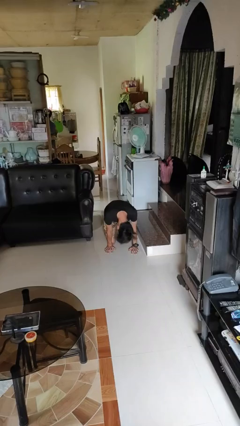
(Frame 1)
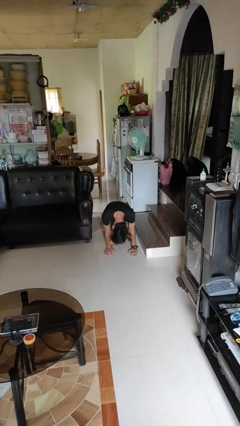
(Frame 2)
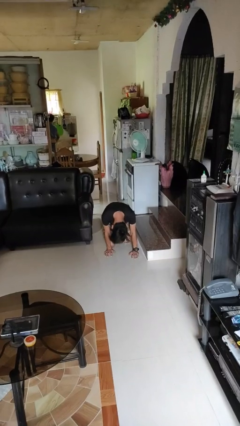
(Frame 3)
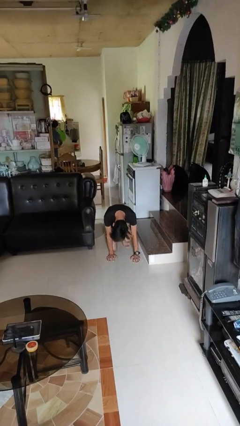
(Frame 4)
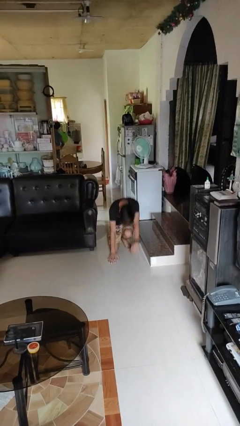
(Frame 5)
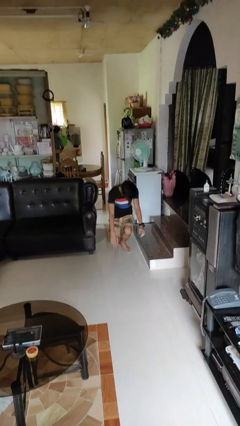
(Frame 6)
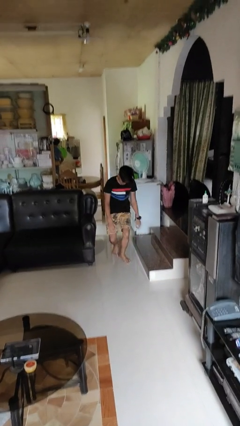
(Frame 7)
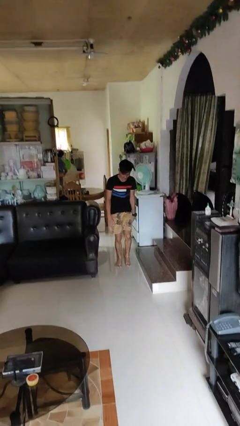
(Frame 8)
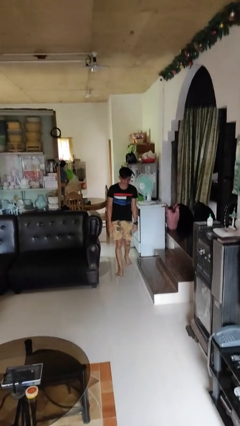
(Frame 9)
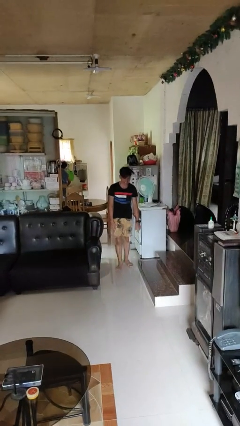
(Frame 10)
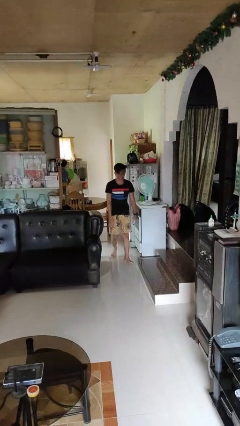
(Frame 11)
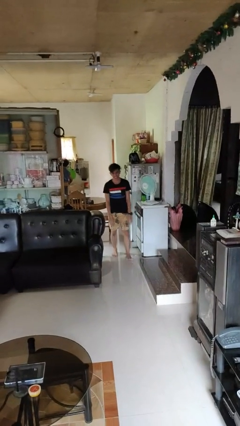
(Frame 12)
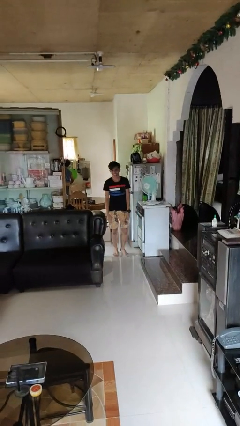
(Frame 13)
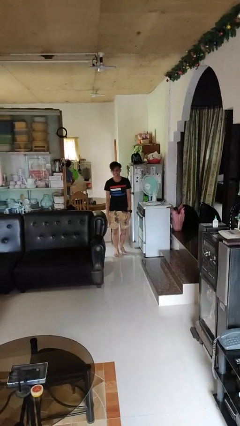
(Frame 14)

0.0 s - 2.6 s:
person stands up from floor

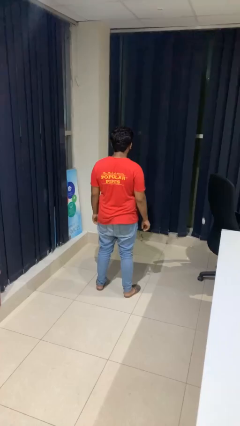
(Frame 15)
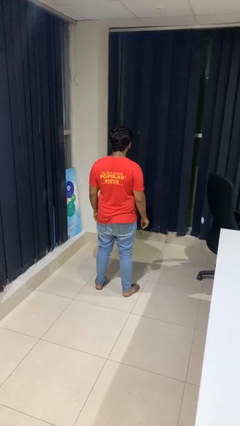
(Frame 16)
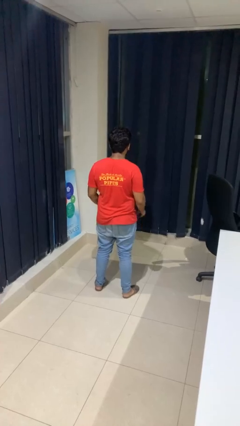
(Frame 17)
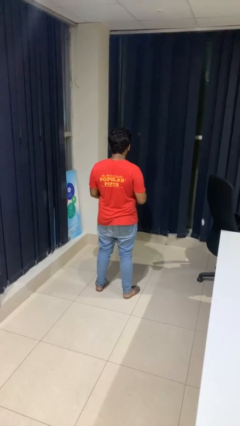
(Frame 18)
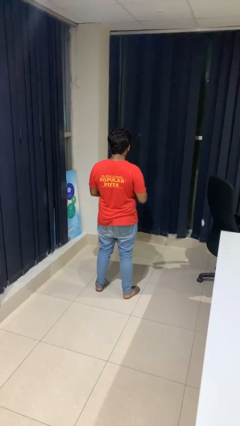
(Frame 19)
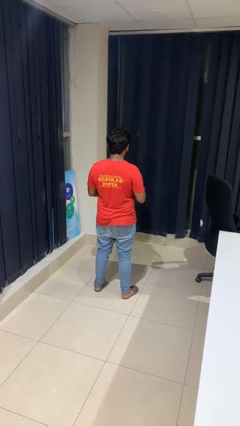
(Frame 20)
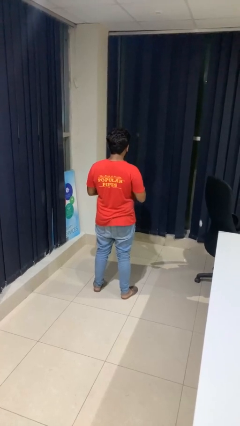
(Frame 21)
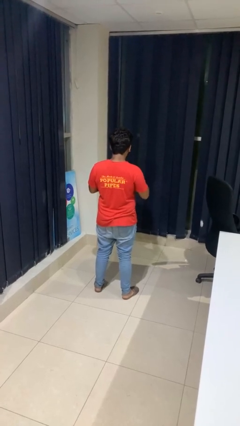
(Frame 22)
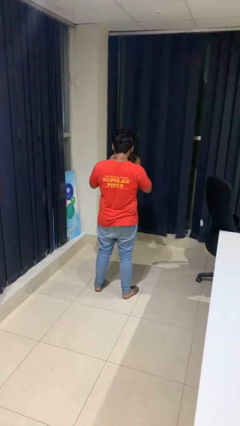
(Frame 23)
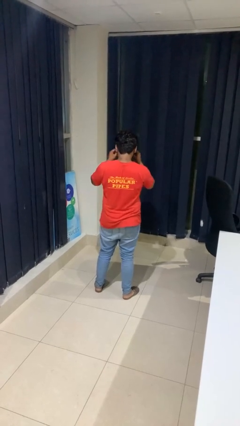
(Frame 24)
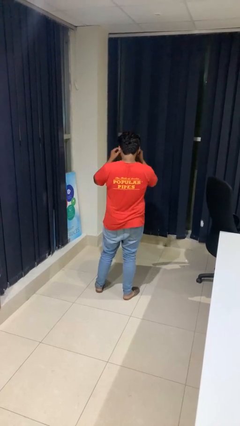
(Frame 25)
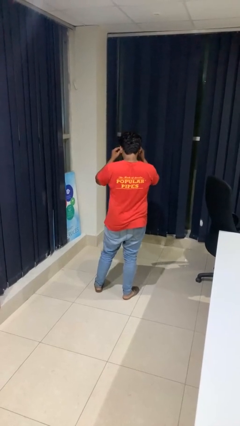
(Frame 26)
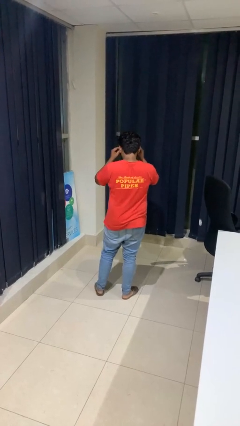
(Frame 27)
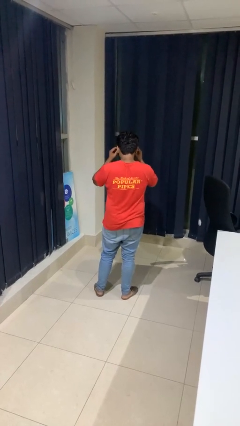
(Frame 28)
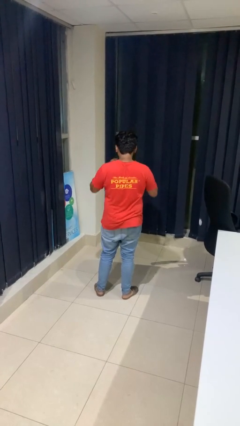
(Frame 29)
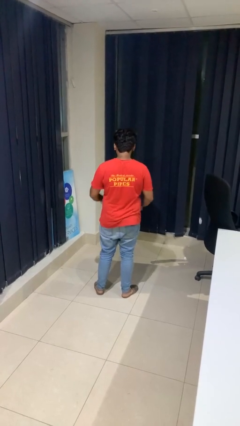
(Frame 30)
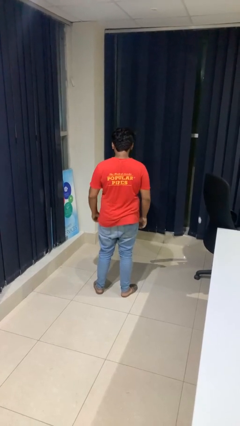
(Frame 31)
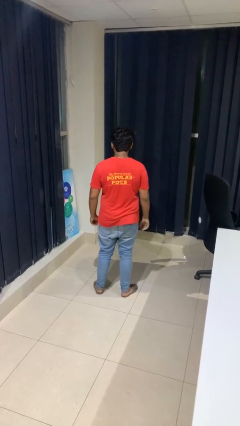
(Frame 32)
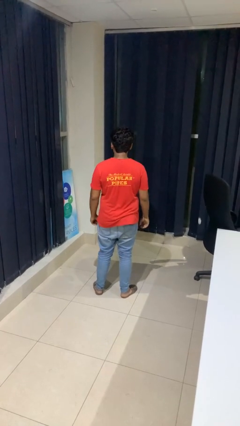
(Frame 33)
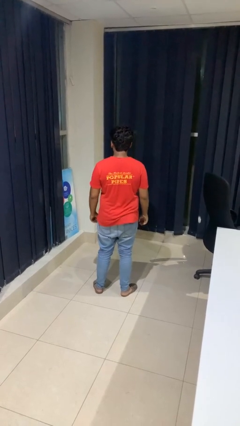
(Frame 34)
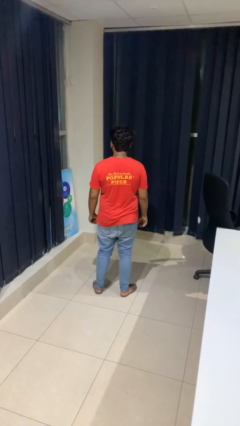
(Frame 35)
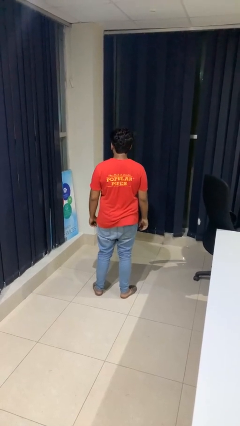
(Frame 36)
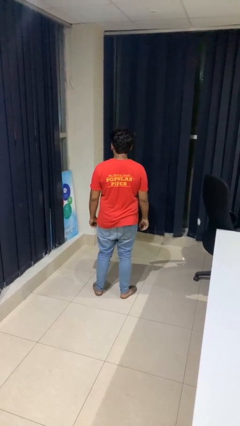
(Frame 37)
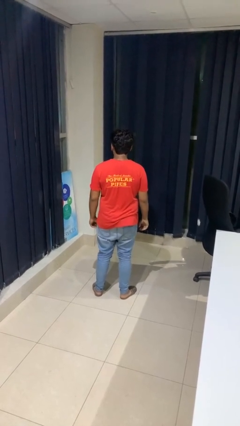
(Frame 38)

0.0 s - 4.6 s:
person puts on glasses

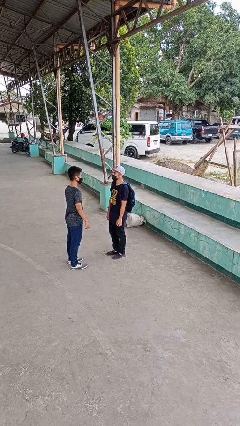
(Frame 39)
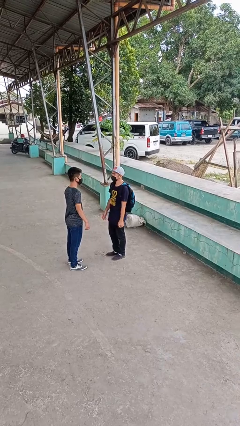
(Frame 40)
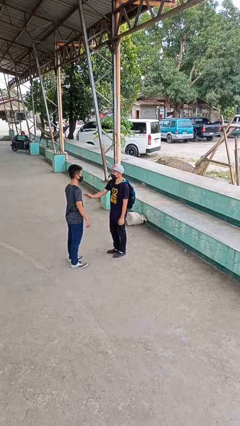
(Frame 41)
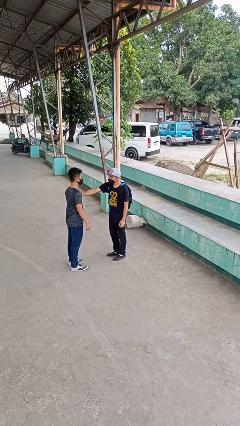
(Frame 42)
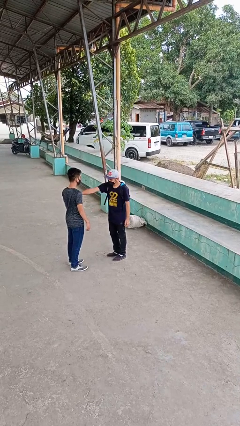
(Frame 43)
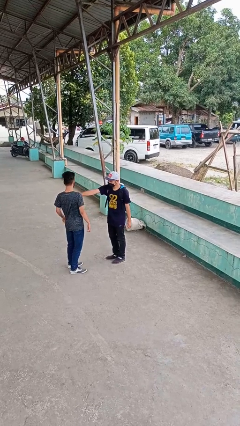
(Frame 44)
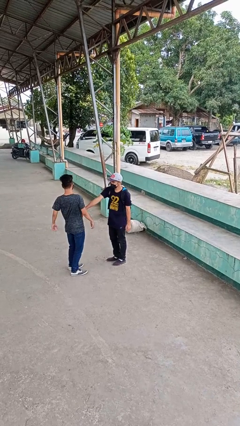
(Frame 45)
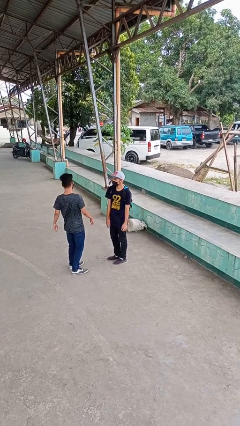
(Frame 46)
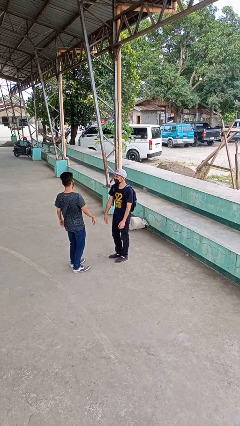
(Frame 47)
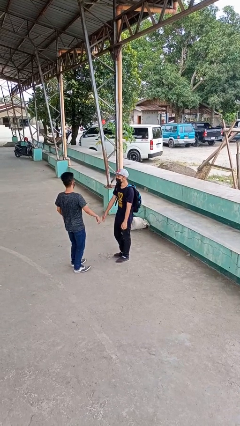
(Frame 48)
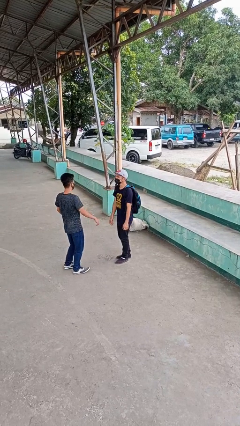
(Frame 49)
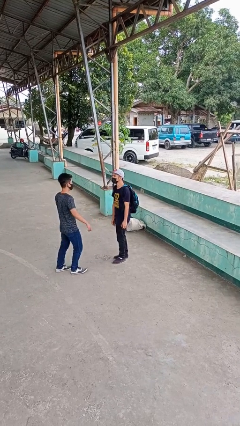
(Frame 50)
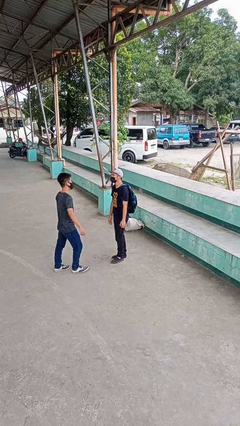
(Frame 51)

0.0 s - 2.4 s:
person shoves person

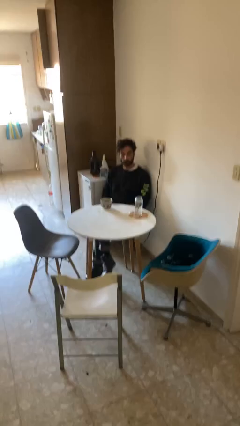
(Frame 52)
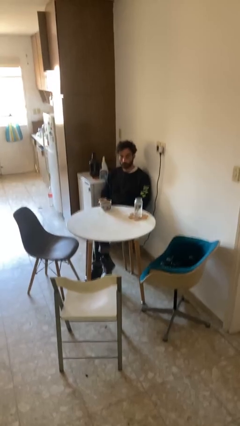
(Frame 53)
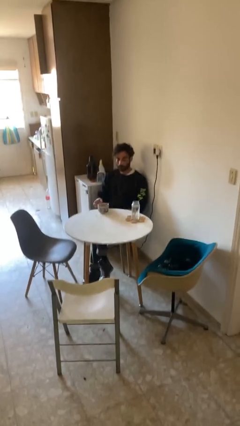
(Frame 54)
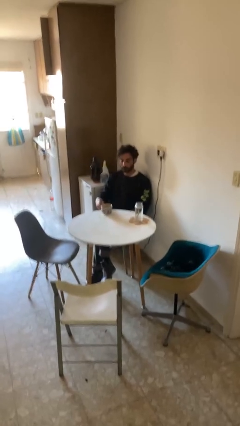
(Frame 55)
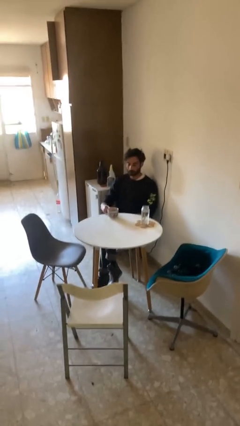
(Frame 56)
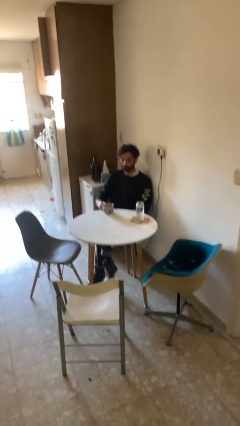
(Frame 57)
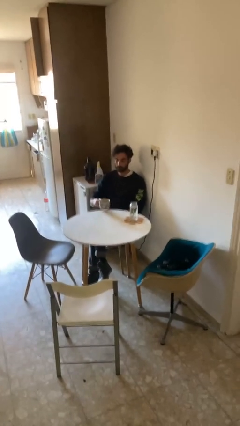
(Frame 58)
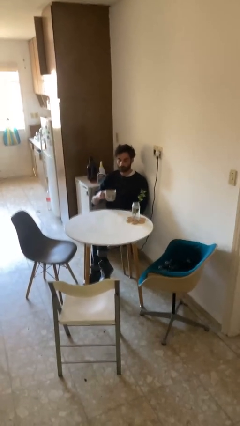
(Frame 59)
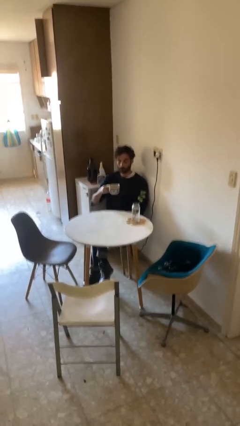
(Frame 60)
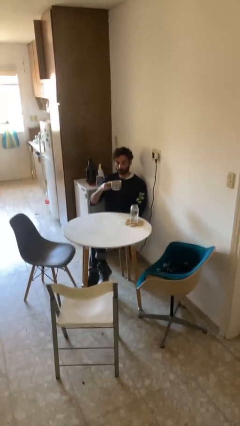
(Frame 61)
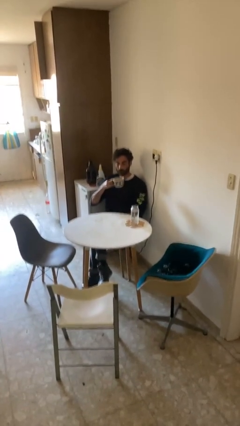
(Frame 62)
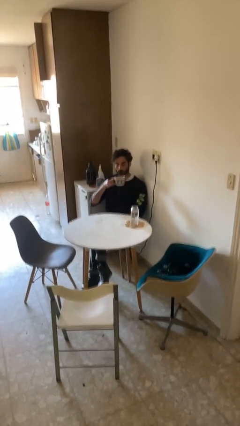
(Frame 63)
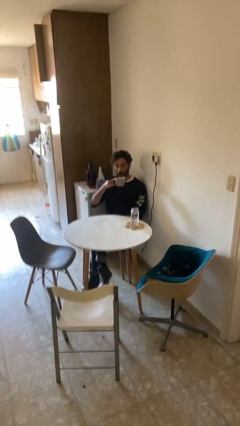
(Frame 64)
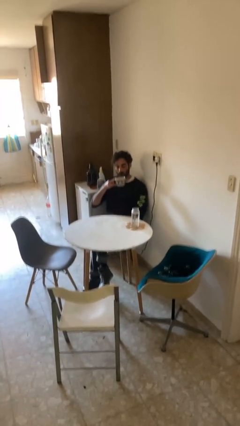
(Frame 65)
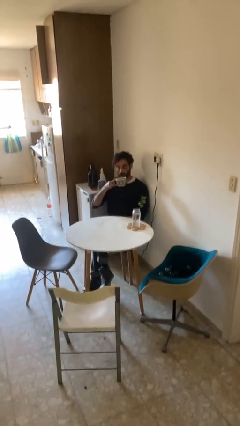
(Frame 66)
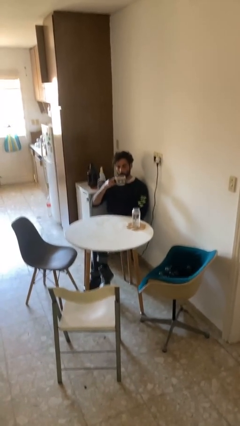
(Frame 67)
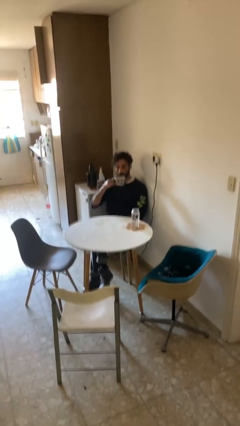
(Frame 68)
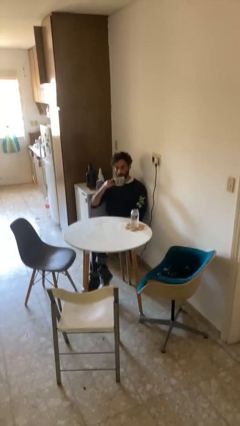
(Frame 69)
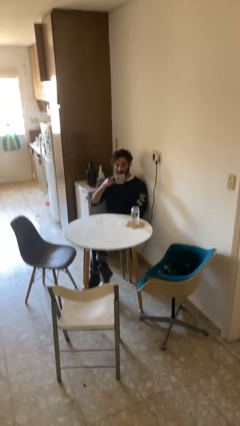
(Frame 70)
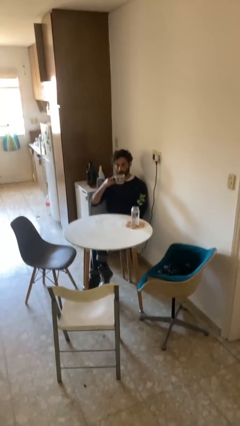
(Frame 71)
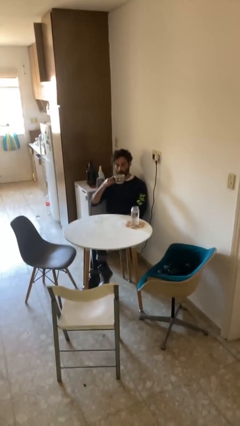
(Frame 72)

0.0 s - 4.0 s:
person picks up object from table

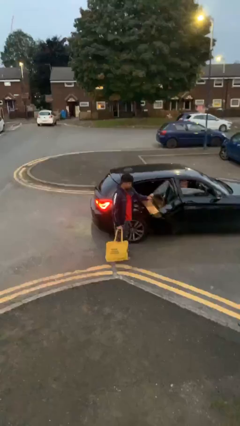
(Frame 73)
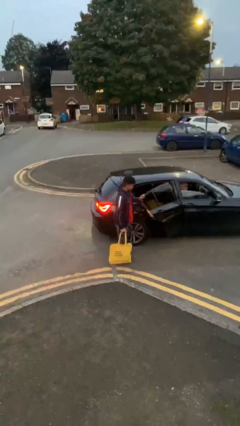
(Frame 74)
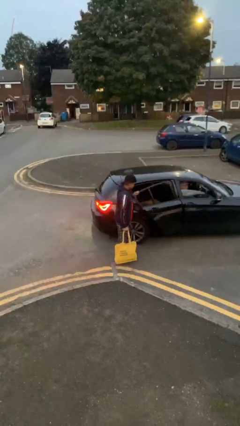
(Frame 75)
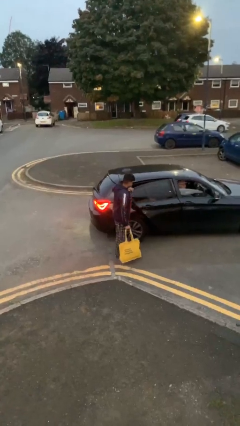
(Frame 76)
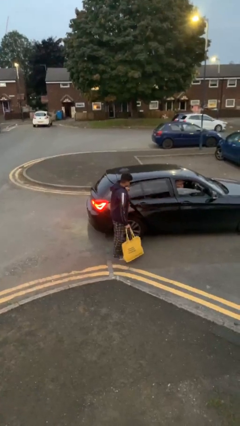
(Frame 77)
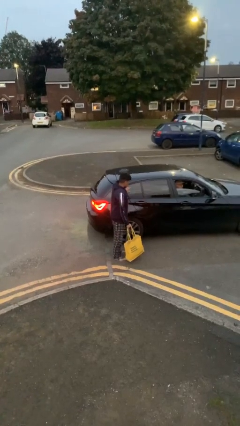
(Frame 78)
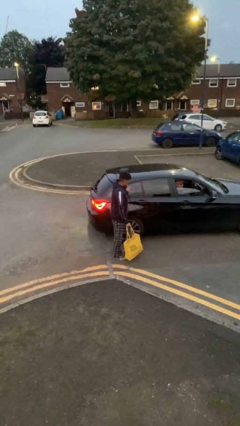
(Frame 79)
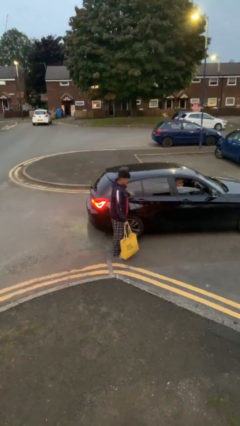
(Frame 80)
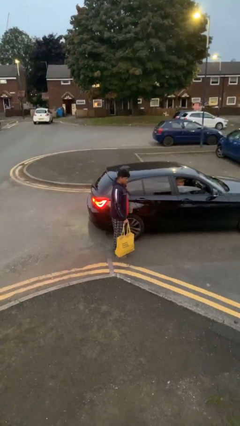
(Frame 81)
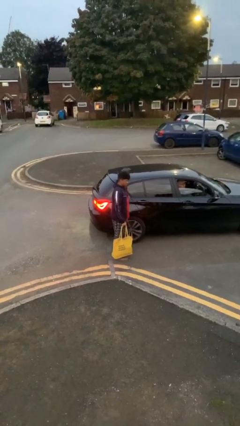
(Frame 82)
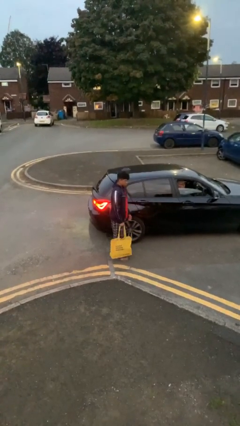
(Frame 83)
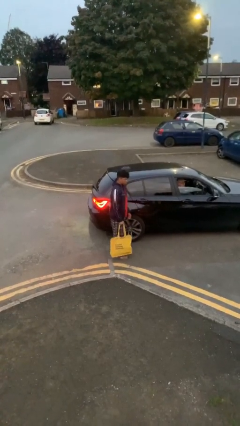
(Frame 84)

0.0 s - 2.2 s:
person closes car door

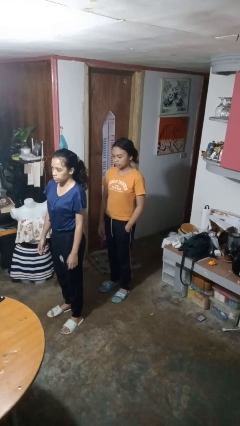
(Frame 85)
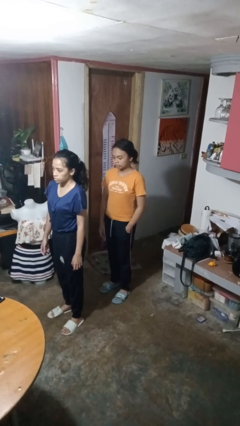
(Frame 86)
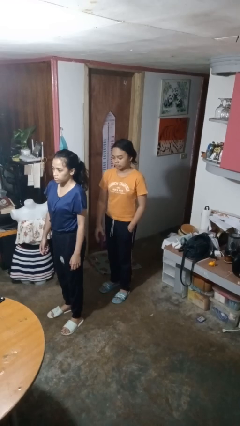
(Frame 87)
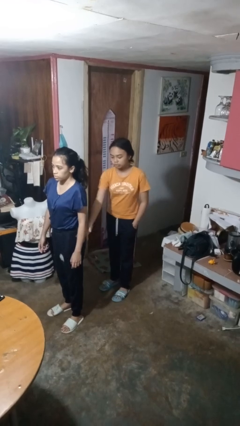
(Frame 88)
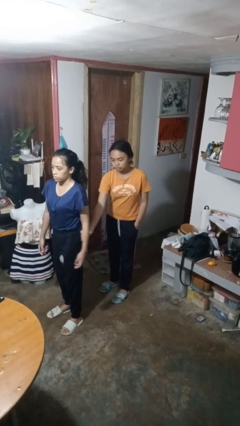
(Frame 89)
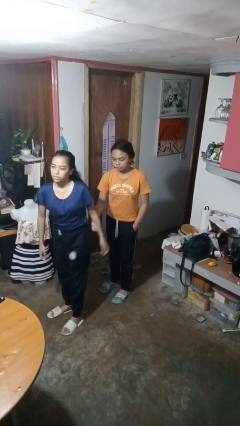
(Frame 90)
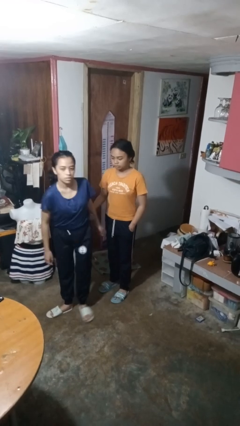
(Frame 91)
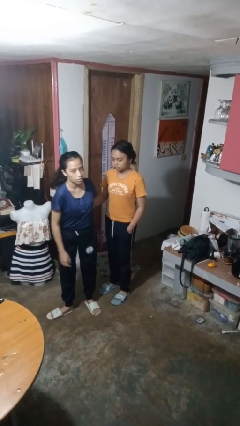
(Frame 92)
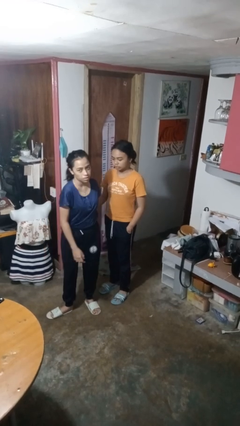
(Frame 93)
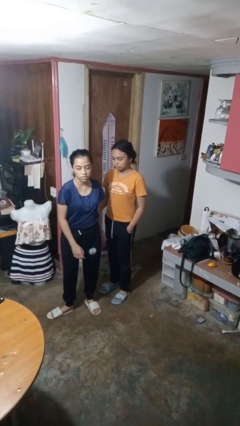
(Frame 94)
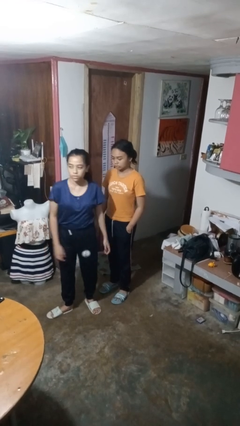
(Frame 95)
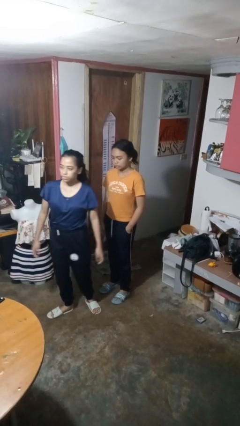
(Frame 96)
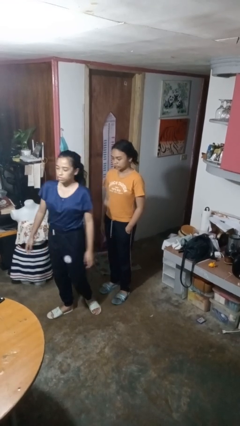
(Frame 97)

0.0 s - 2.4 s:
person grabs person by forearm
